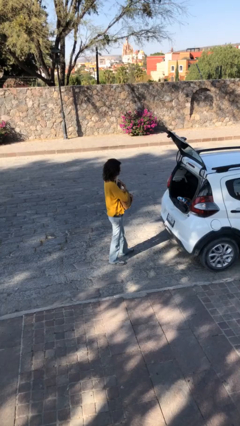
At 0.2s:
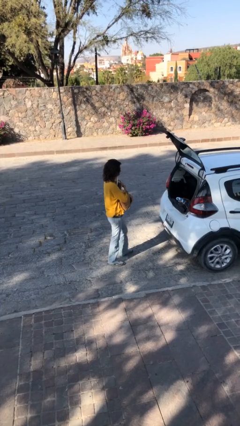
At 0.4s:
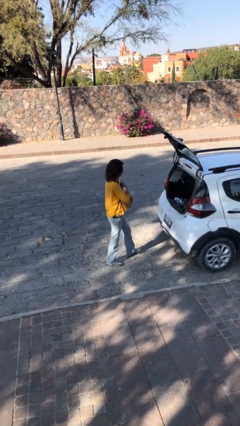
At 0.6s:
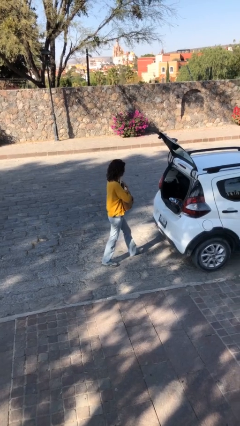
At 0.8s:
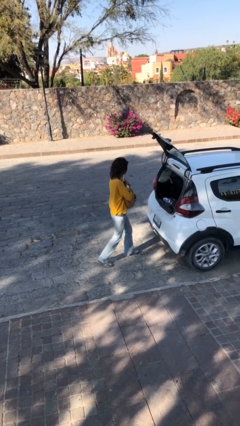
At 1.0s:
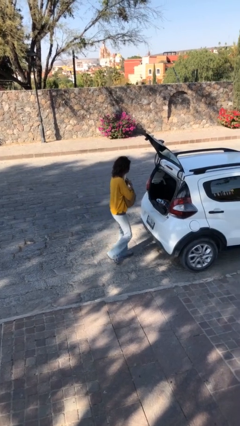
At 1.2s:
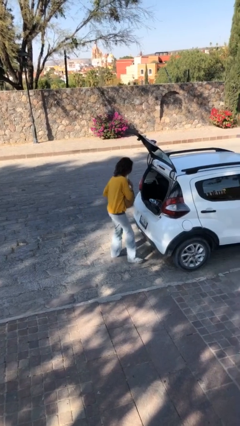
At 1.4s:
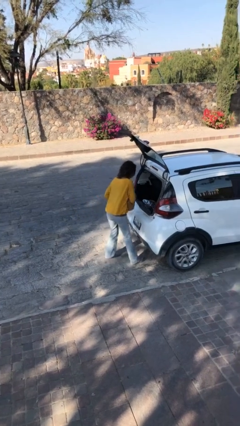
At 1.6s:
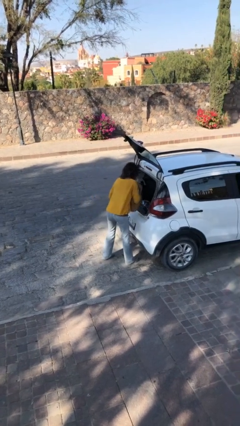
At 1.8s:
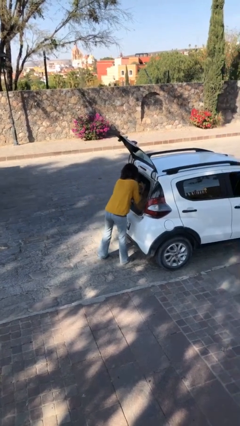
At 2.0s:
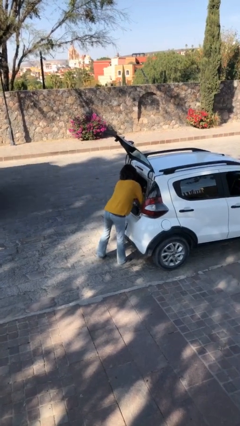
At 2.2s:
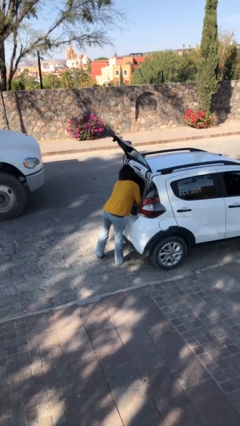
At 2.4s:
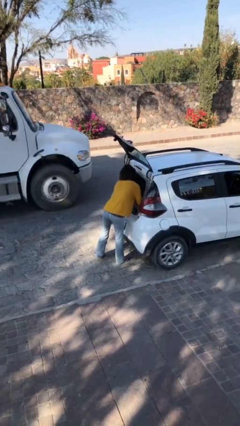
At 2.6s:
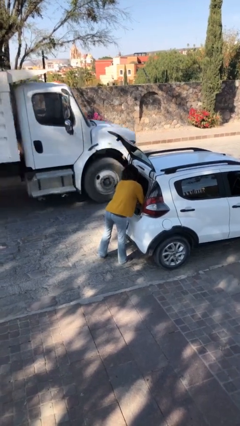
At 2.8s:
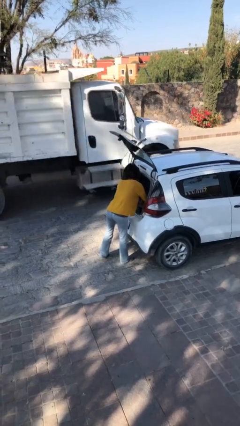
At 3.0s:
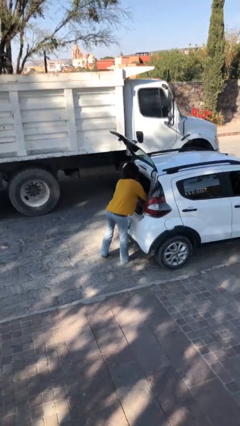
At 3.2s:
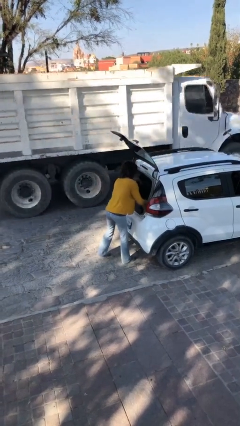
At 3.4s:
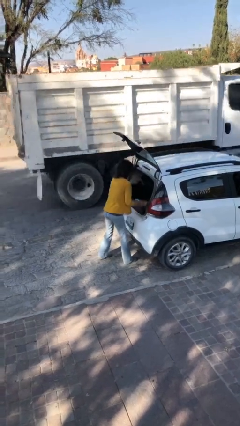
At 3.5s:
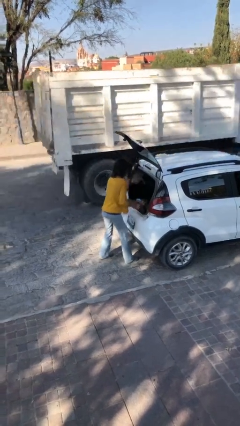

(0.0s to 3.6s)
person loads car

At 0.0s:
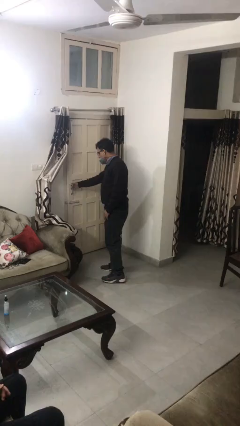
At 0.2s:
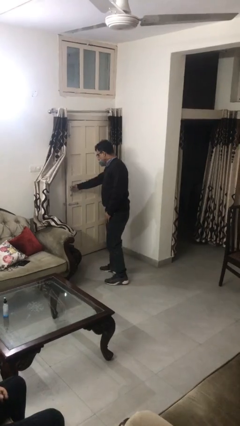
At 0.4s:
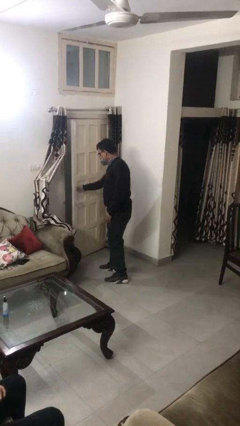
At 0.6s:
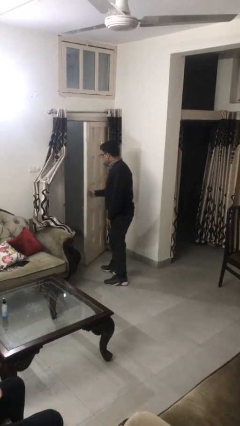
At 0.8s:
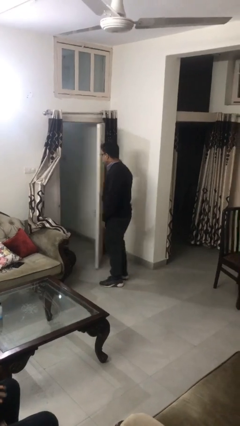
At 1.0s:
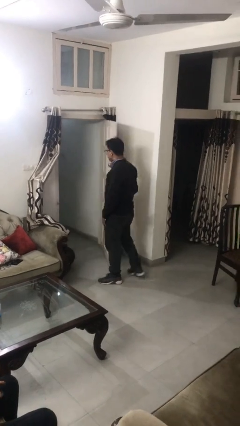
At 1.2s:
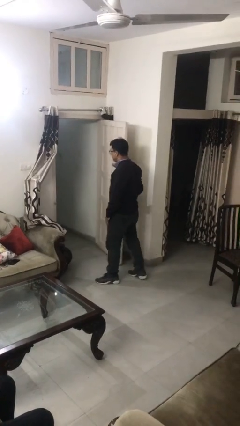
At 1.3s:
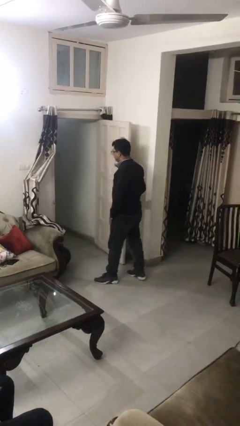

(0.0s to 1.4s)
person opens facility door

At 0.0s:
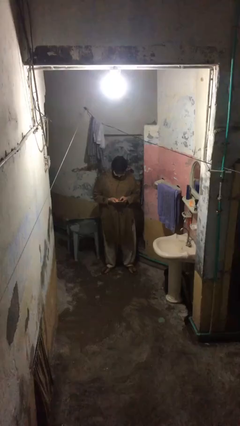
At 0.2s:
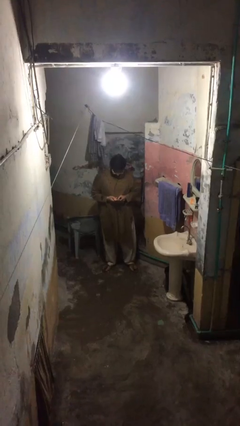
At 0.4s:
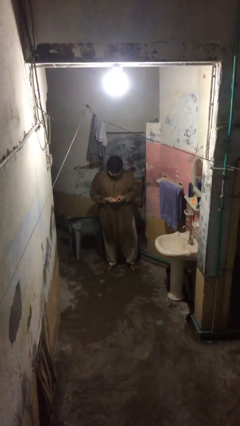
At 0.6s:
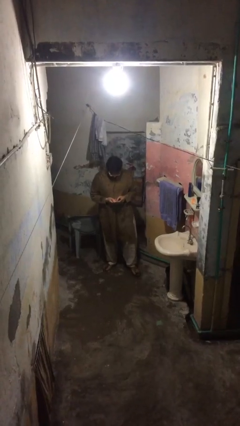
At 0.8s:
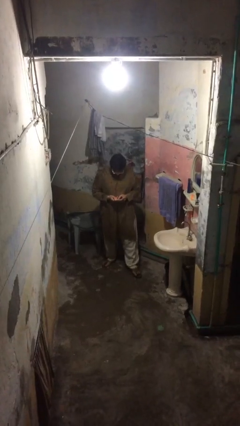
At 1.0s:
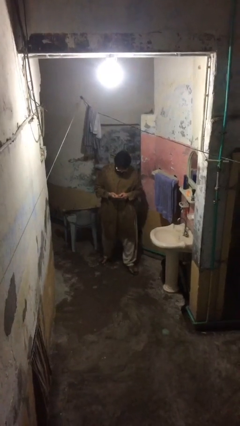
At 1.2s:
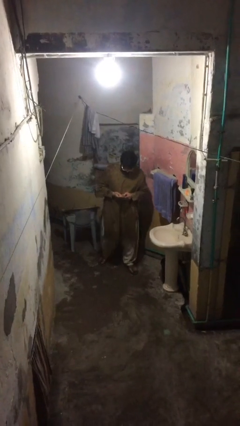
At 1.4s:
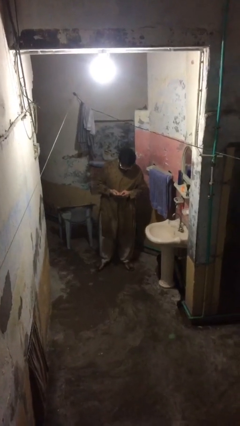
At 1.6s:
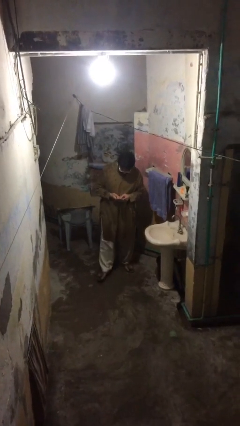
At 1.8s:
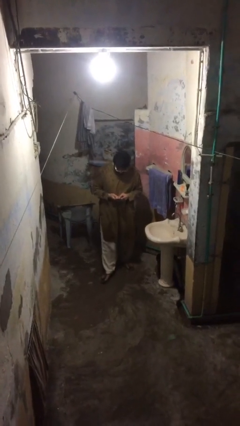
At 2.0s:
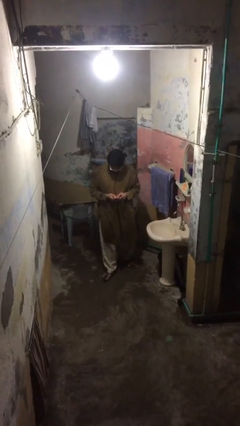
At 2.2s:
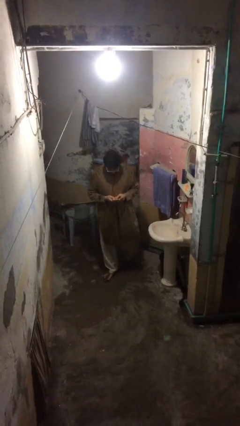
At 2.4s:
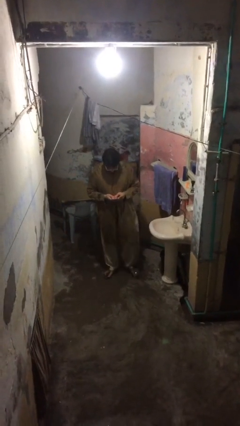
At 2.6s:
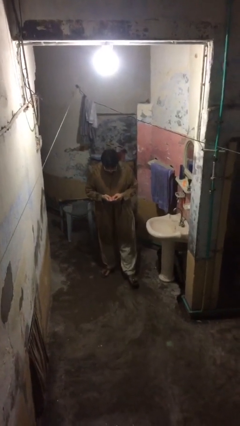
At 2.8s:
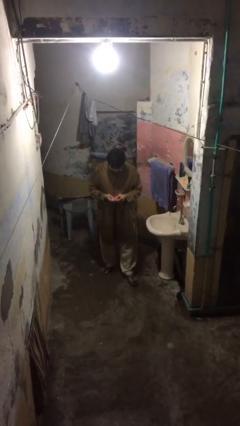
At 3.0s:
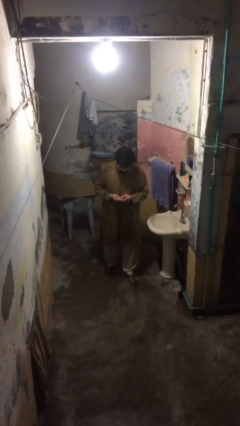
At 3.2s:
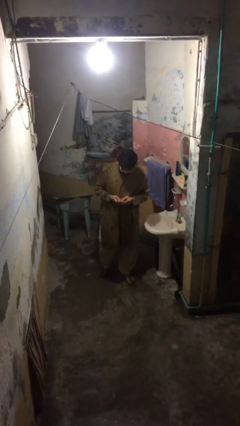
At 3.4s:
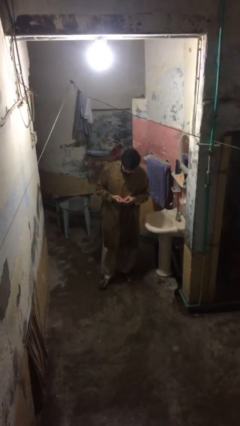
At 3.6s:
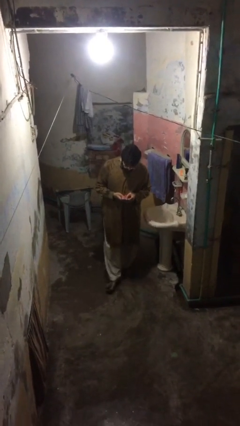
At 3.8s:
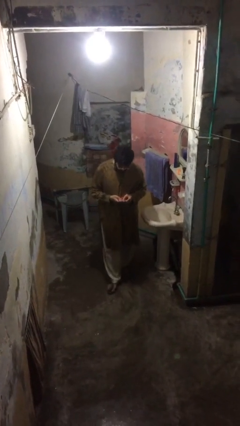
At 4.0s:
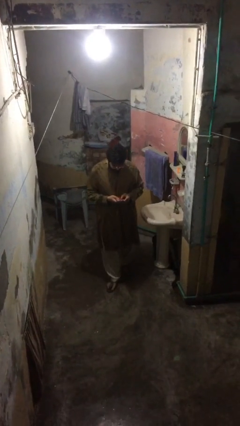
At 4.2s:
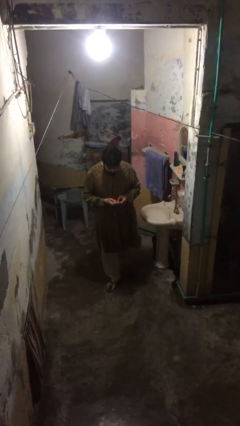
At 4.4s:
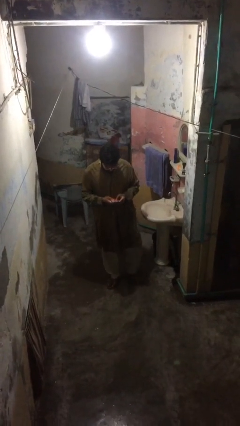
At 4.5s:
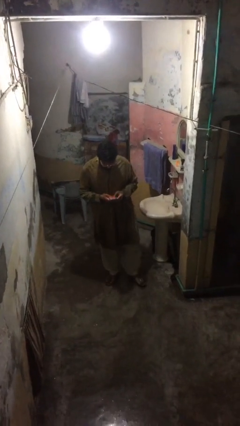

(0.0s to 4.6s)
person texts on phone

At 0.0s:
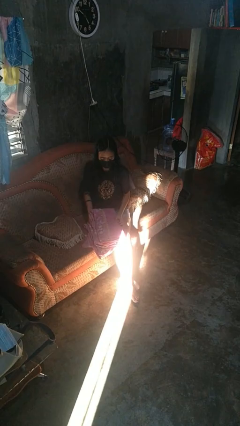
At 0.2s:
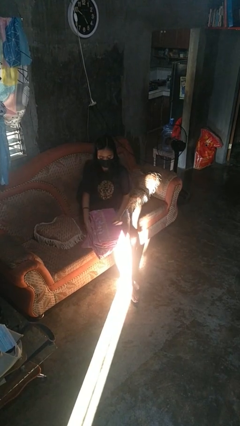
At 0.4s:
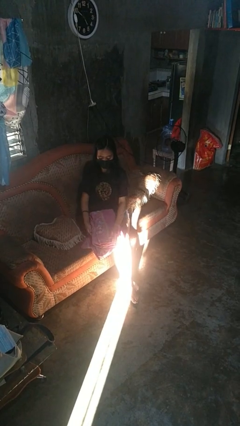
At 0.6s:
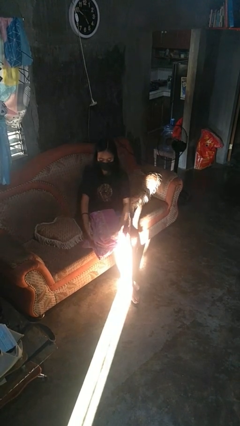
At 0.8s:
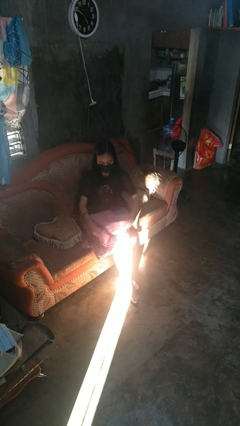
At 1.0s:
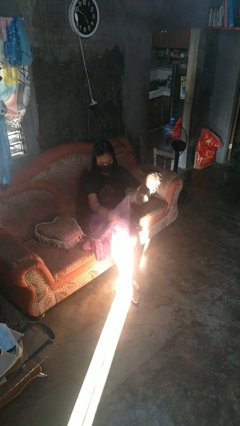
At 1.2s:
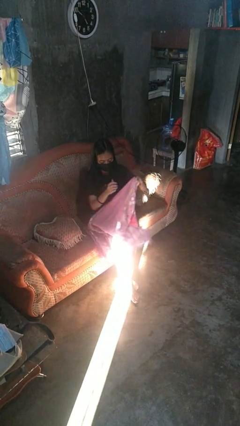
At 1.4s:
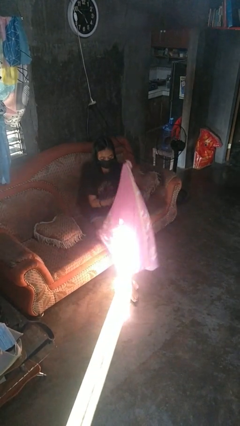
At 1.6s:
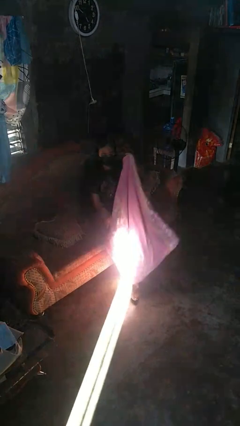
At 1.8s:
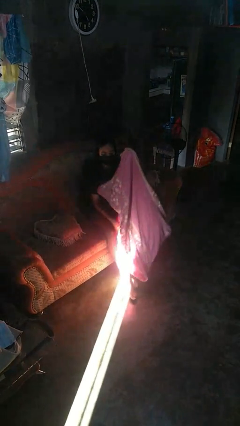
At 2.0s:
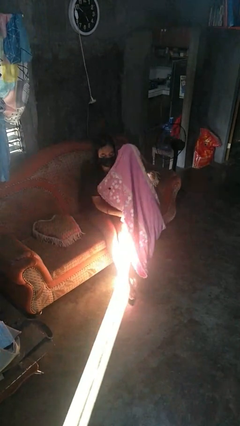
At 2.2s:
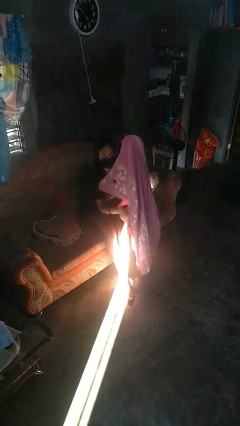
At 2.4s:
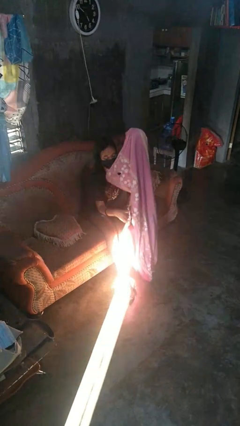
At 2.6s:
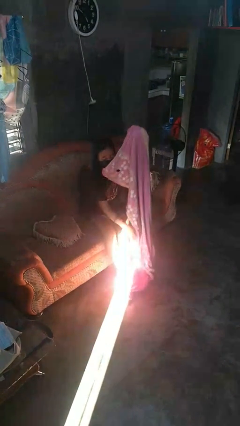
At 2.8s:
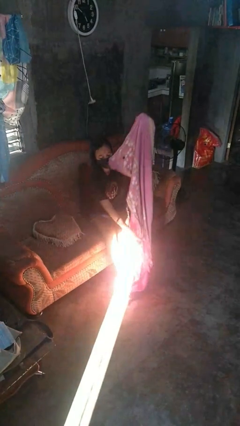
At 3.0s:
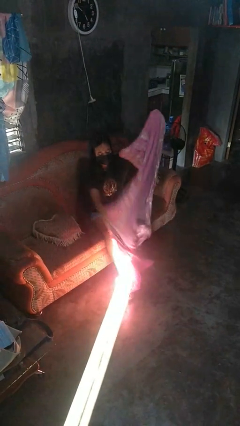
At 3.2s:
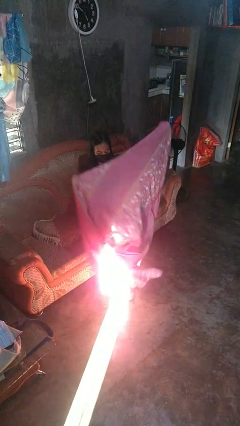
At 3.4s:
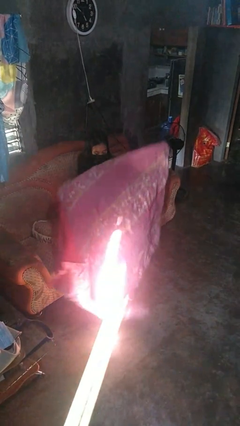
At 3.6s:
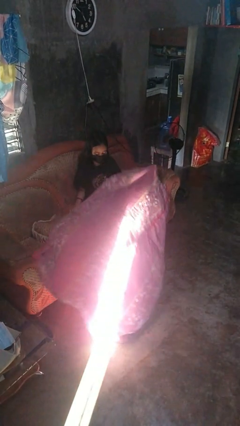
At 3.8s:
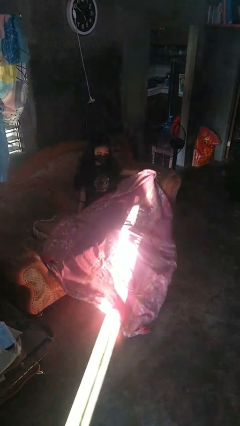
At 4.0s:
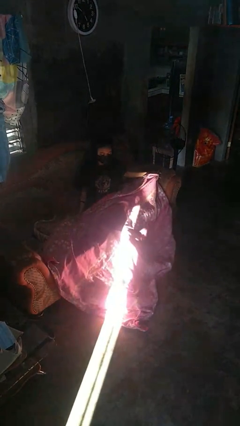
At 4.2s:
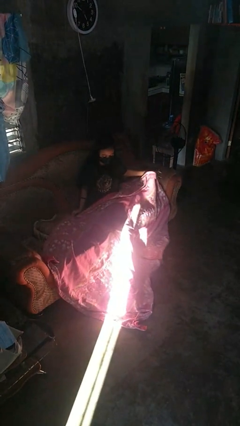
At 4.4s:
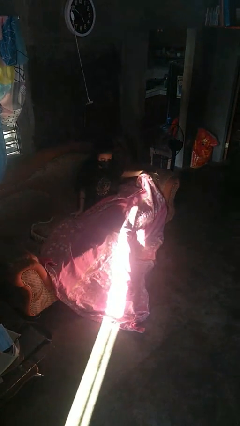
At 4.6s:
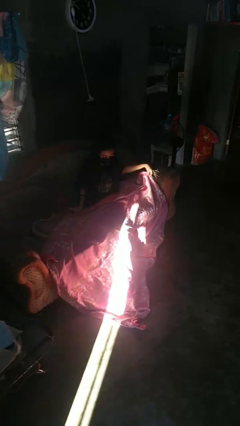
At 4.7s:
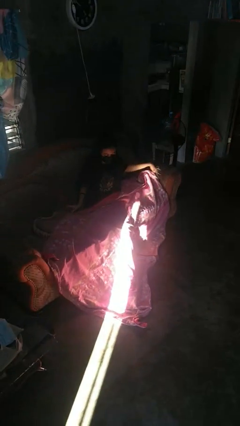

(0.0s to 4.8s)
person unfolds blanket

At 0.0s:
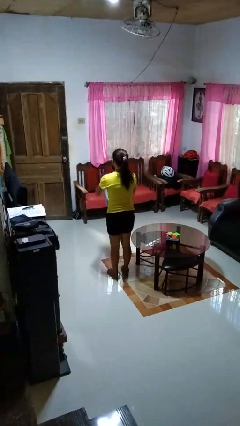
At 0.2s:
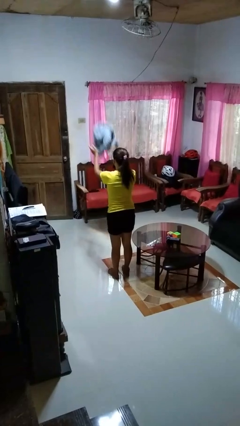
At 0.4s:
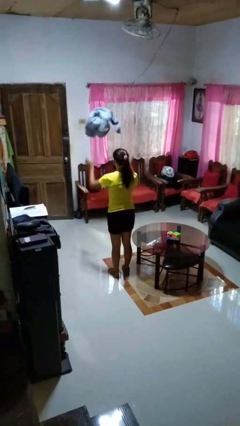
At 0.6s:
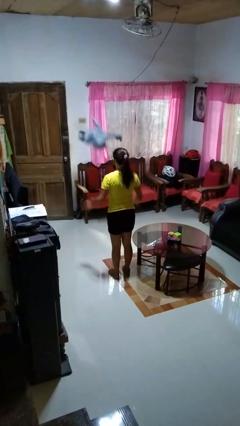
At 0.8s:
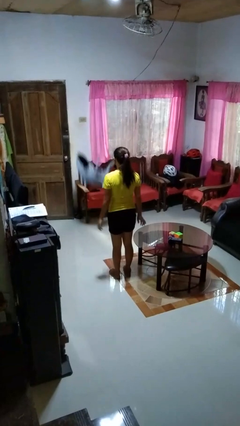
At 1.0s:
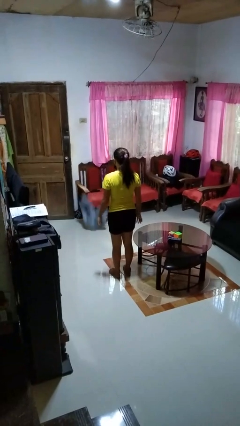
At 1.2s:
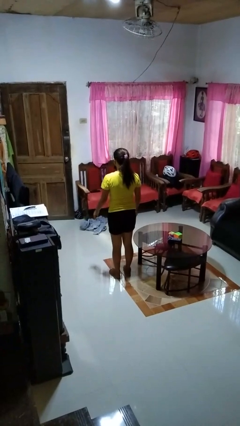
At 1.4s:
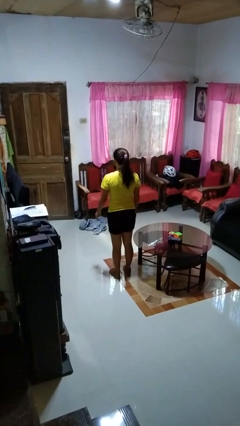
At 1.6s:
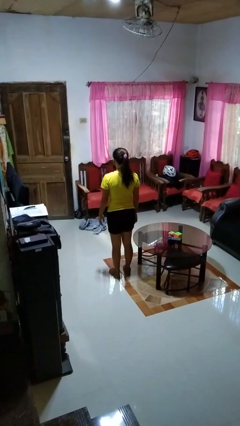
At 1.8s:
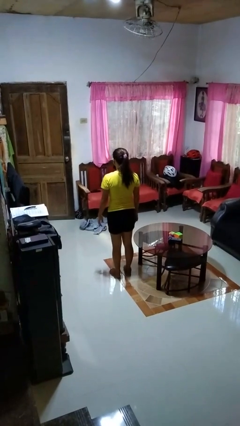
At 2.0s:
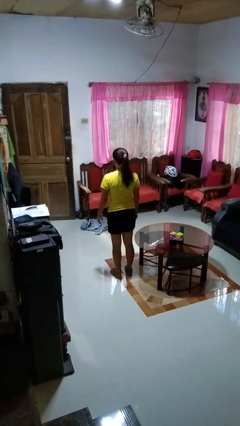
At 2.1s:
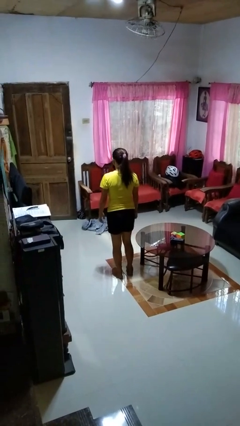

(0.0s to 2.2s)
person throws object into air

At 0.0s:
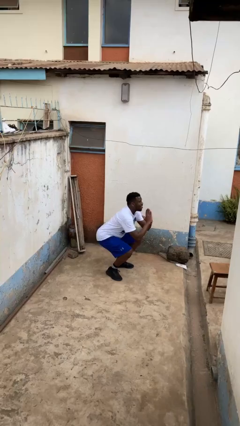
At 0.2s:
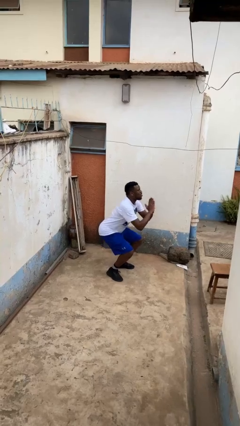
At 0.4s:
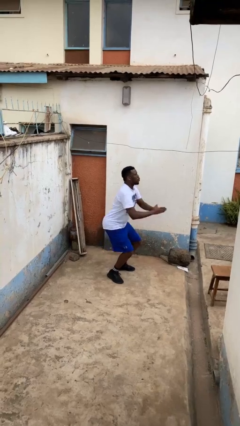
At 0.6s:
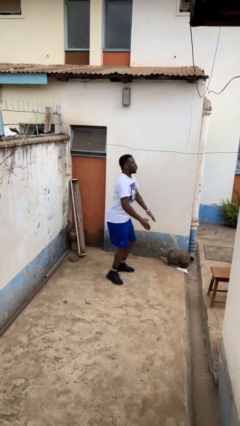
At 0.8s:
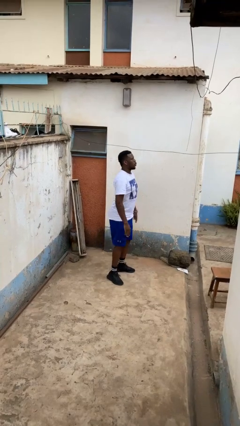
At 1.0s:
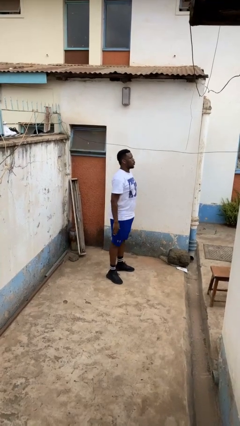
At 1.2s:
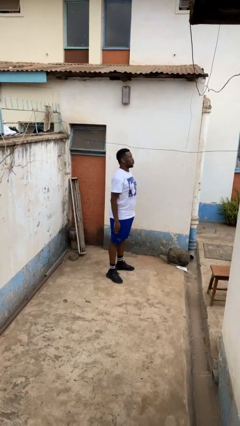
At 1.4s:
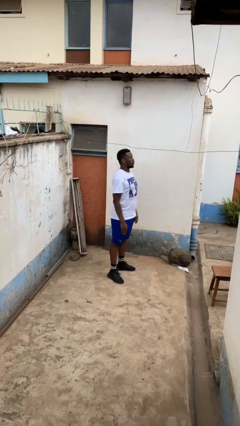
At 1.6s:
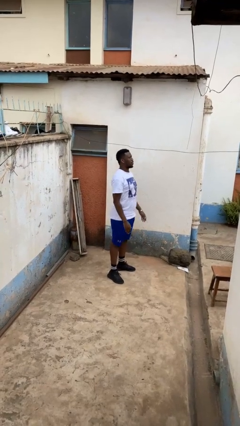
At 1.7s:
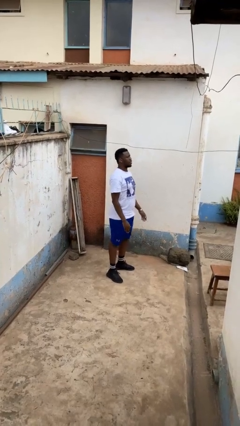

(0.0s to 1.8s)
person stands up
